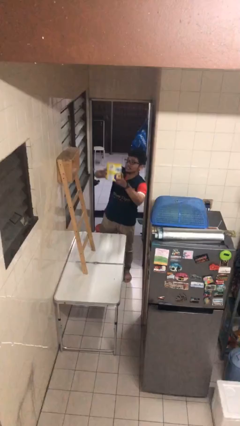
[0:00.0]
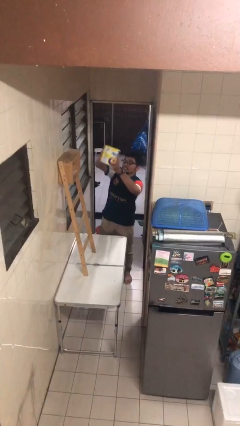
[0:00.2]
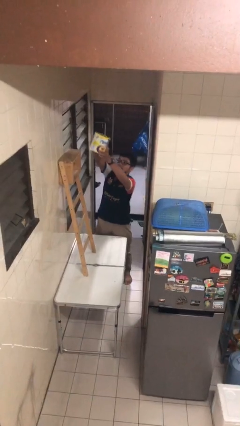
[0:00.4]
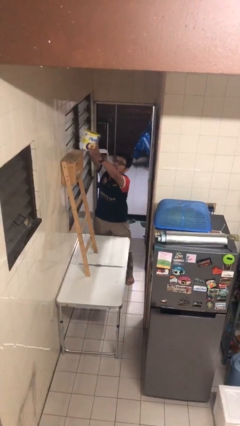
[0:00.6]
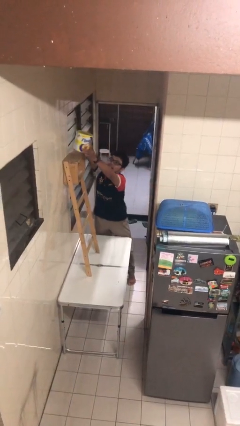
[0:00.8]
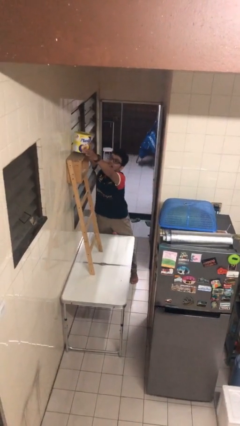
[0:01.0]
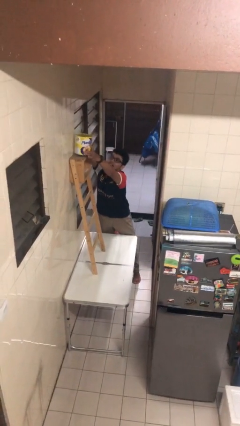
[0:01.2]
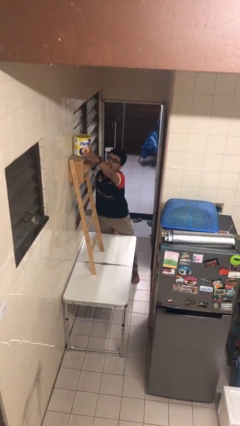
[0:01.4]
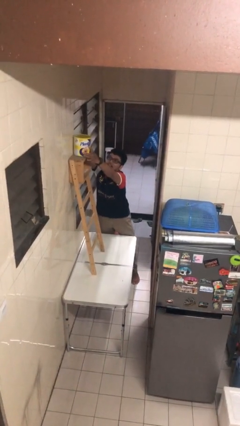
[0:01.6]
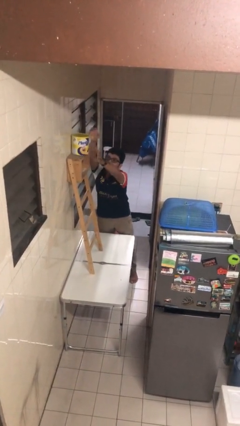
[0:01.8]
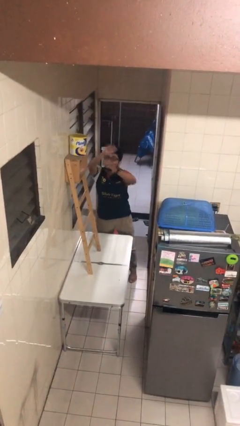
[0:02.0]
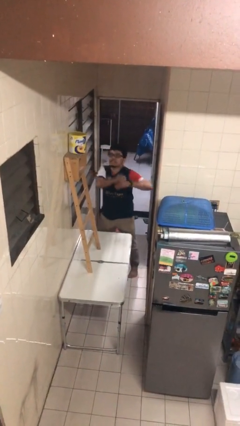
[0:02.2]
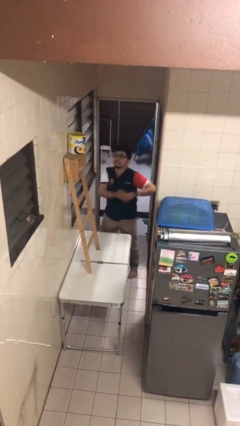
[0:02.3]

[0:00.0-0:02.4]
person puts down object on shelf

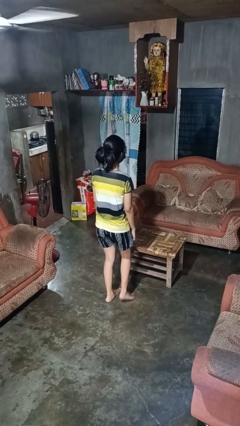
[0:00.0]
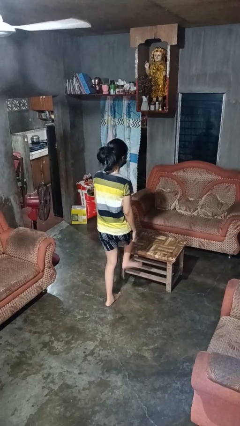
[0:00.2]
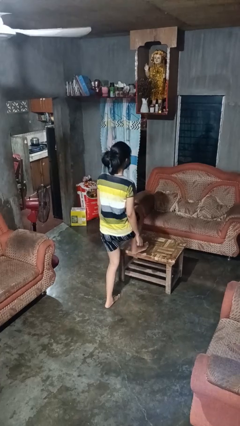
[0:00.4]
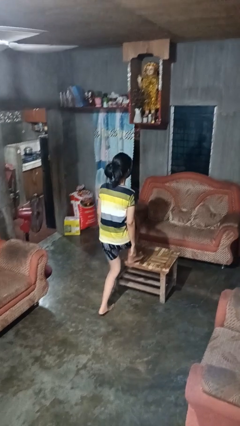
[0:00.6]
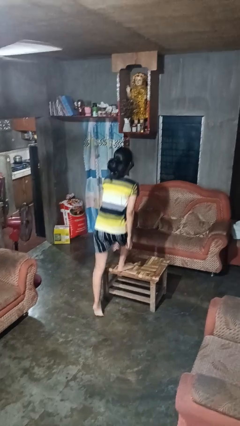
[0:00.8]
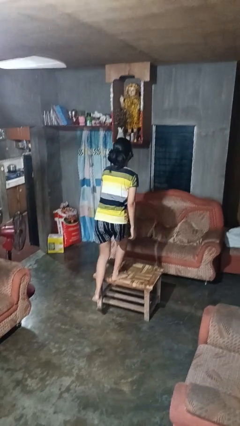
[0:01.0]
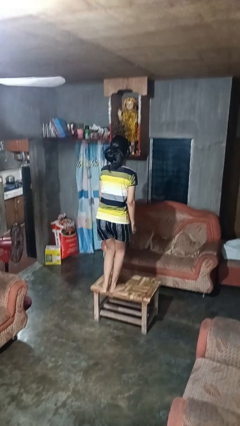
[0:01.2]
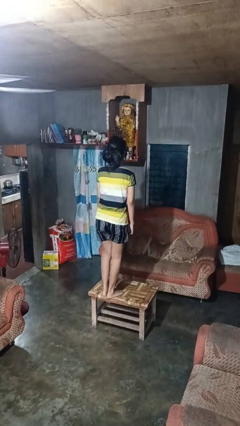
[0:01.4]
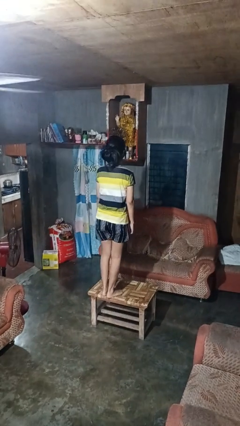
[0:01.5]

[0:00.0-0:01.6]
person climbs on table

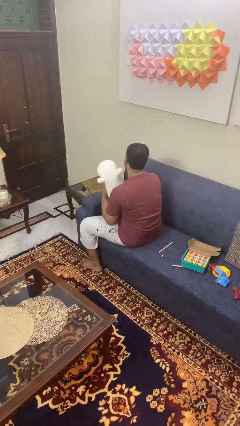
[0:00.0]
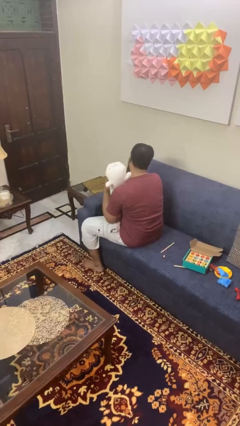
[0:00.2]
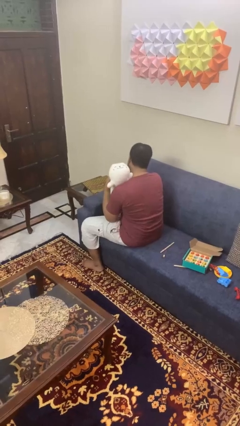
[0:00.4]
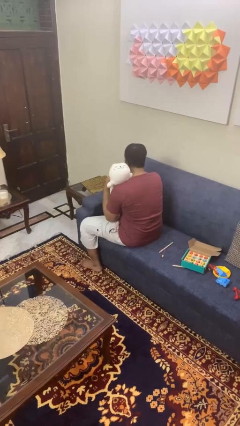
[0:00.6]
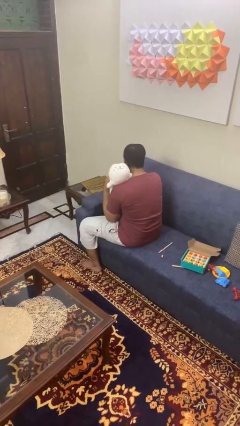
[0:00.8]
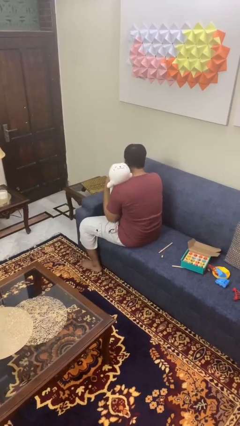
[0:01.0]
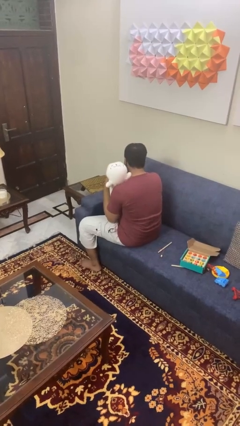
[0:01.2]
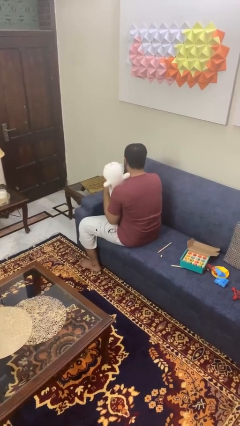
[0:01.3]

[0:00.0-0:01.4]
person hugs stuffed animal

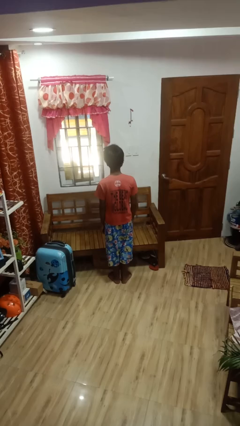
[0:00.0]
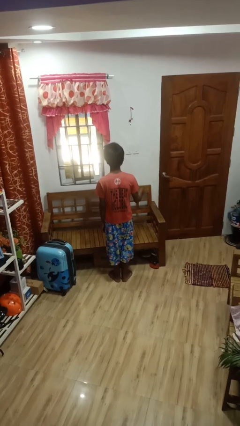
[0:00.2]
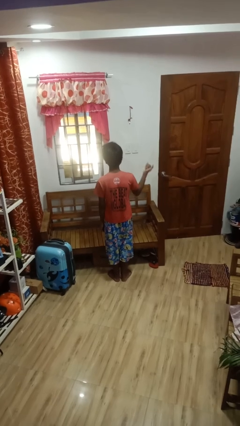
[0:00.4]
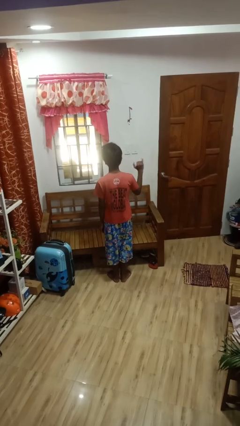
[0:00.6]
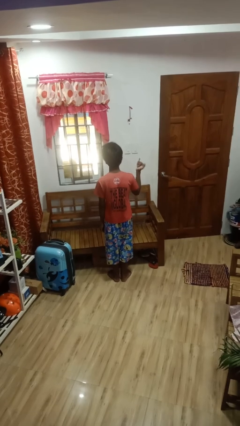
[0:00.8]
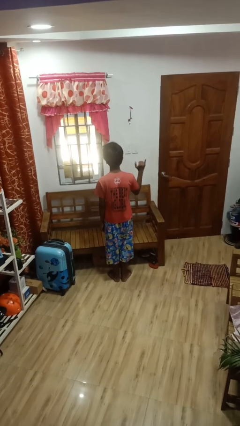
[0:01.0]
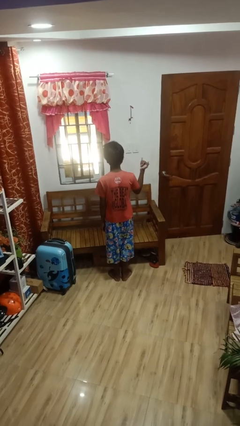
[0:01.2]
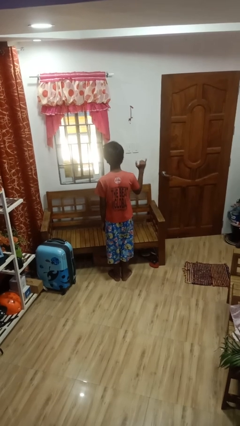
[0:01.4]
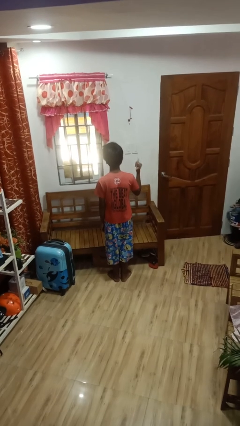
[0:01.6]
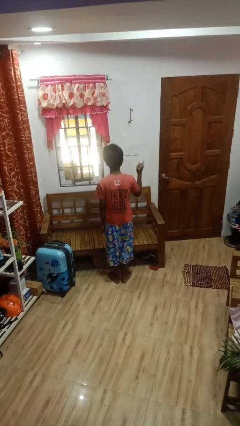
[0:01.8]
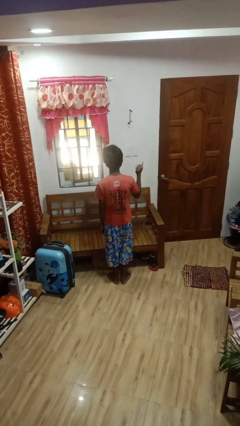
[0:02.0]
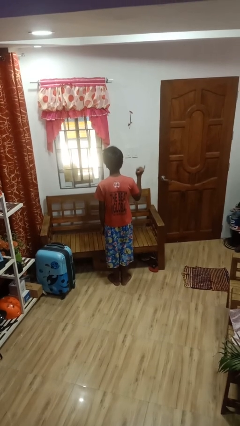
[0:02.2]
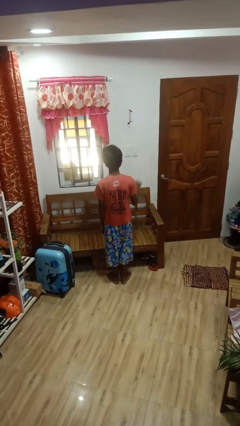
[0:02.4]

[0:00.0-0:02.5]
person gestures hang loose

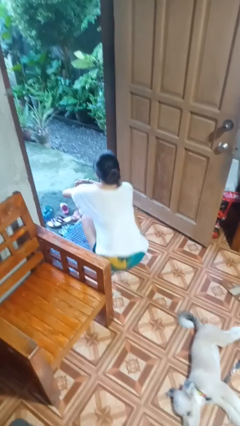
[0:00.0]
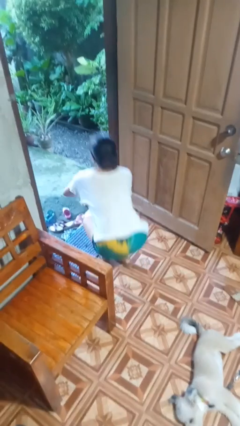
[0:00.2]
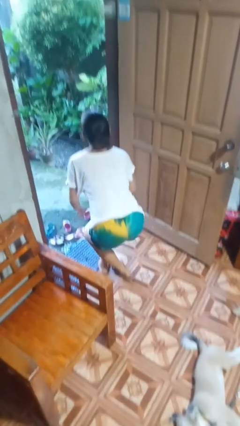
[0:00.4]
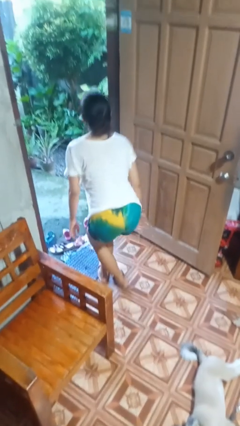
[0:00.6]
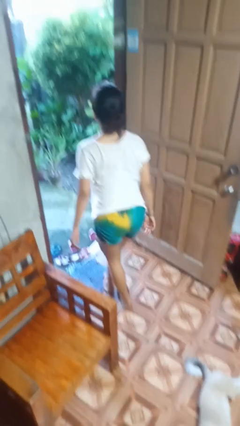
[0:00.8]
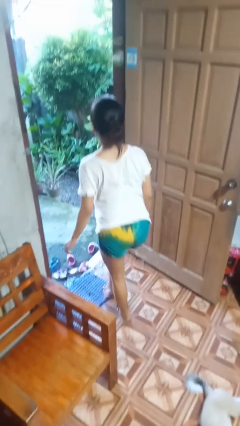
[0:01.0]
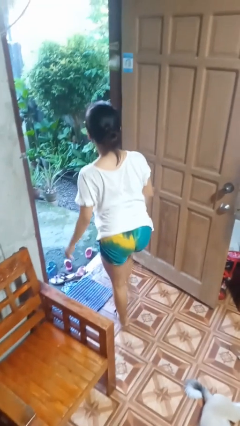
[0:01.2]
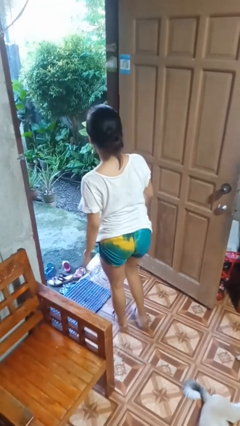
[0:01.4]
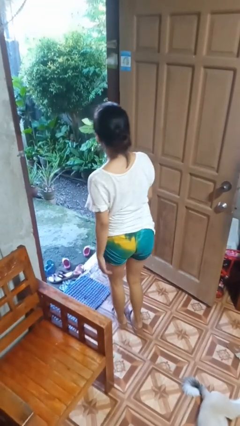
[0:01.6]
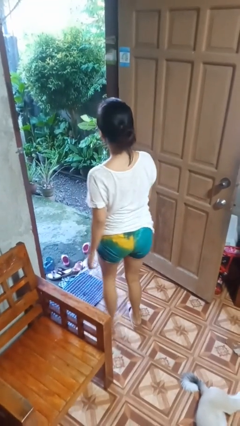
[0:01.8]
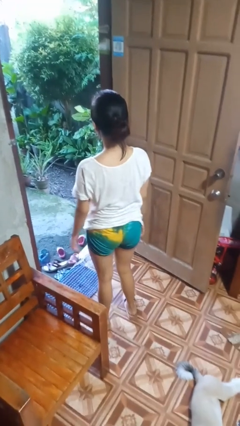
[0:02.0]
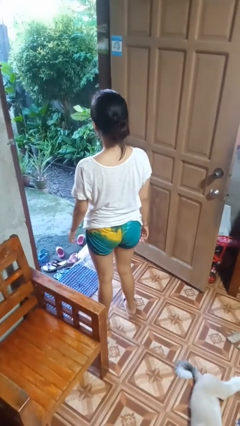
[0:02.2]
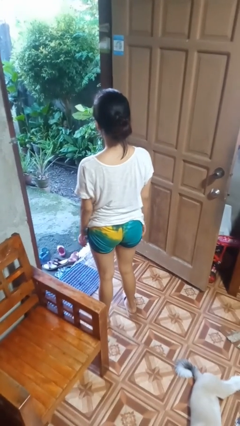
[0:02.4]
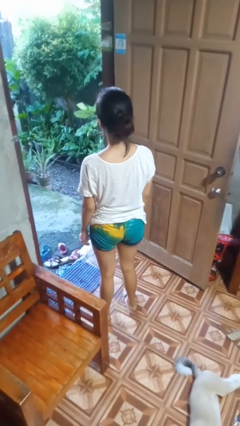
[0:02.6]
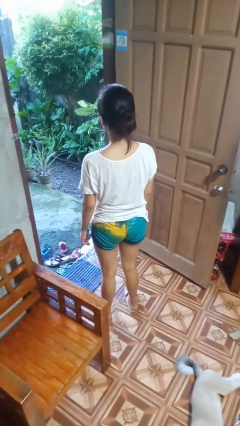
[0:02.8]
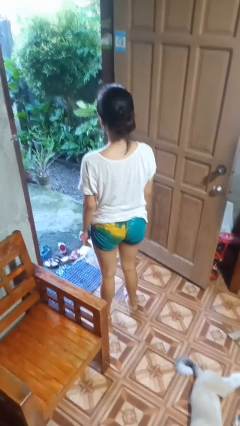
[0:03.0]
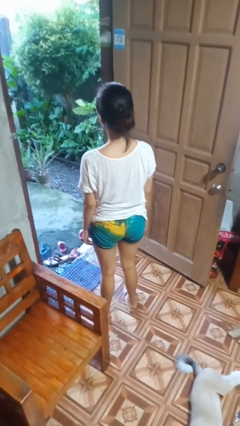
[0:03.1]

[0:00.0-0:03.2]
person stands up from floor

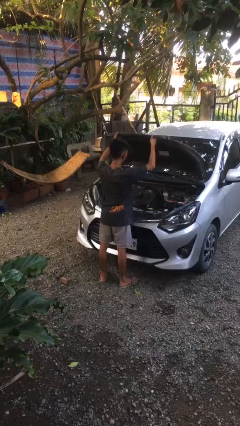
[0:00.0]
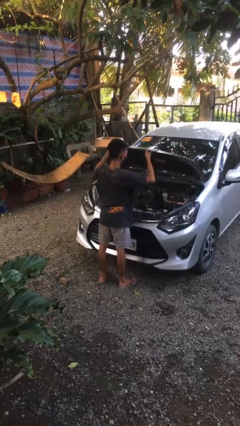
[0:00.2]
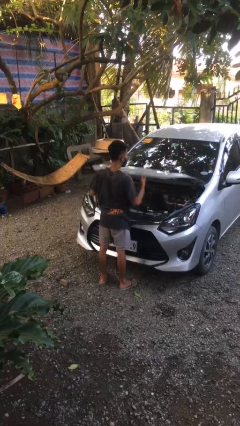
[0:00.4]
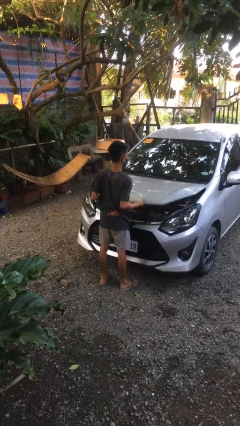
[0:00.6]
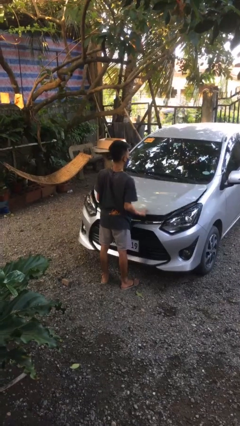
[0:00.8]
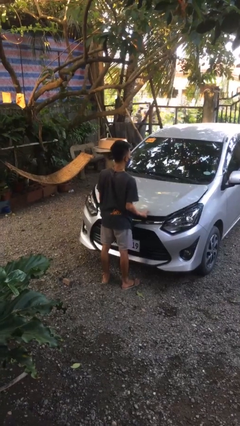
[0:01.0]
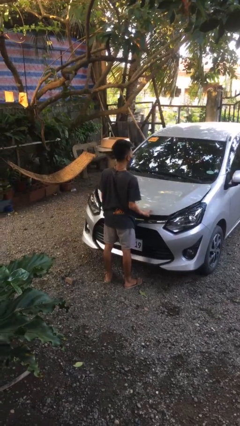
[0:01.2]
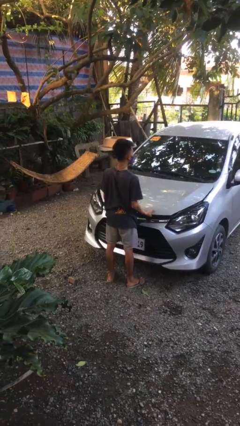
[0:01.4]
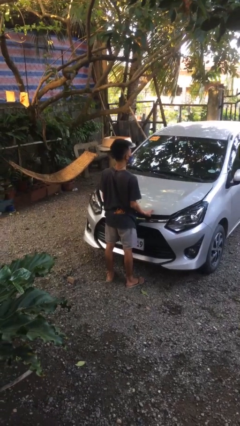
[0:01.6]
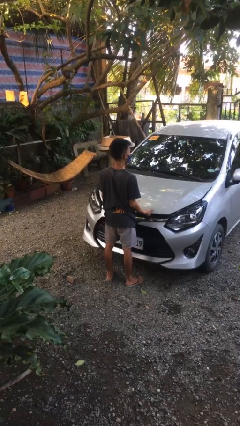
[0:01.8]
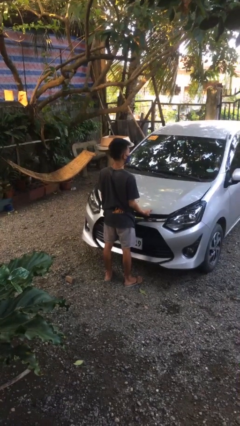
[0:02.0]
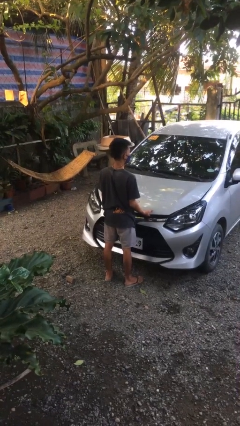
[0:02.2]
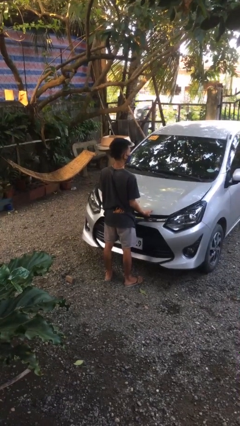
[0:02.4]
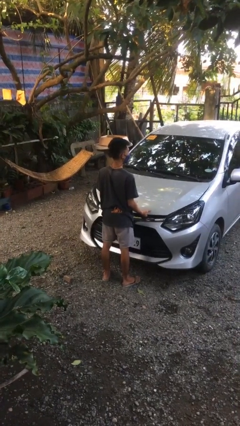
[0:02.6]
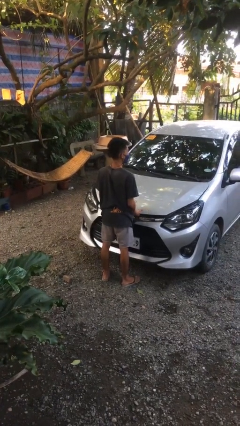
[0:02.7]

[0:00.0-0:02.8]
person closes car hood

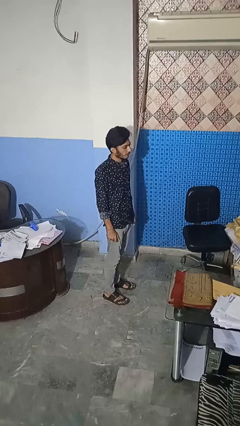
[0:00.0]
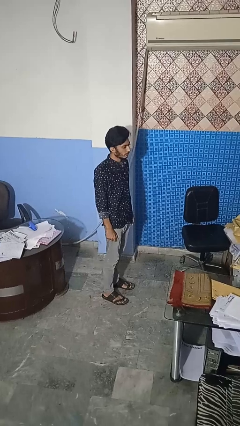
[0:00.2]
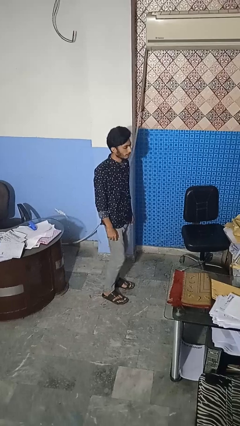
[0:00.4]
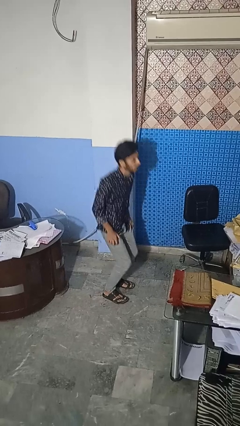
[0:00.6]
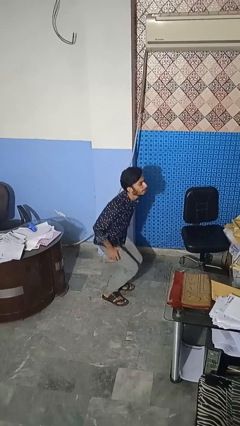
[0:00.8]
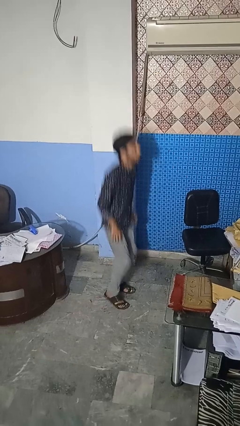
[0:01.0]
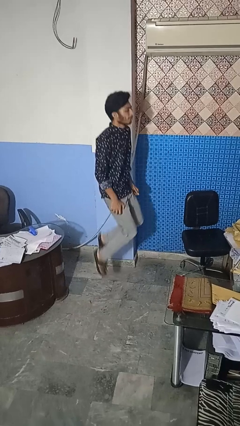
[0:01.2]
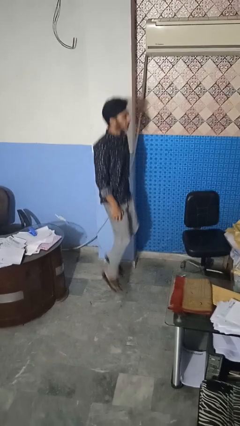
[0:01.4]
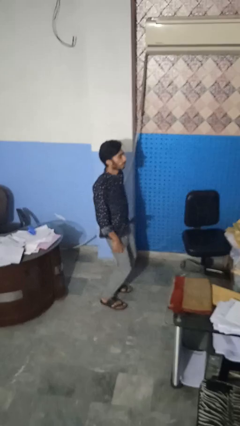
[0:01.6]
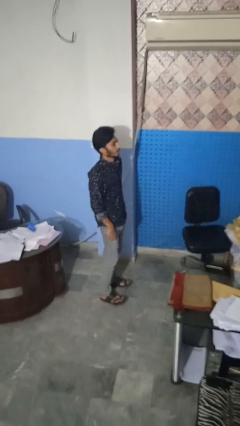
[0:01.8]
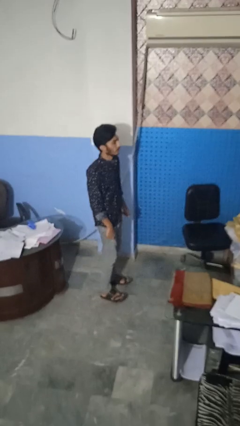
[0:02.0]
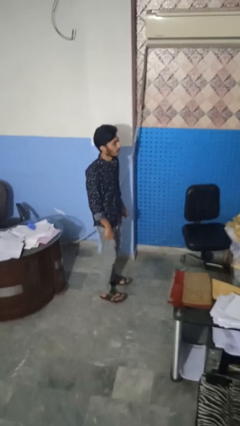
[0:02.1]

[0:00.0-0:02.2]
person jumps

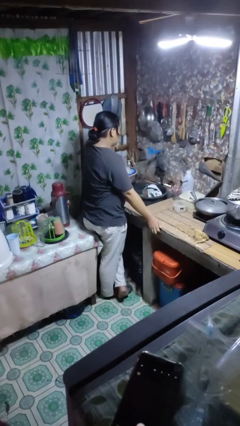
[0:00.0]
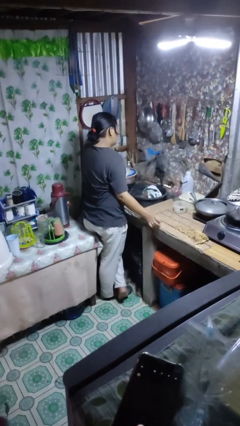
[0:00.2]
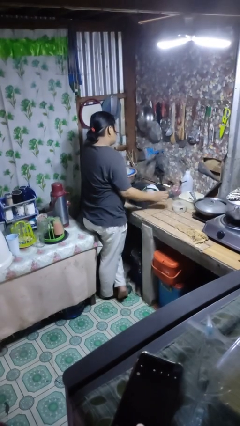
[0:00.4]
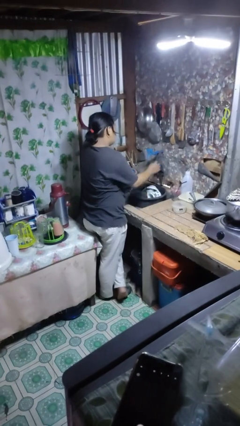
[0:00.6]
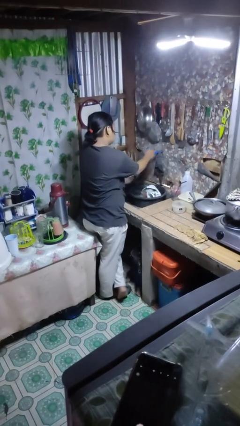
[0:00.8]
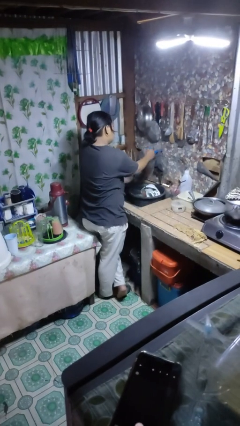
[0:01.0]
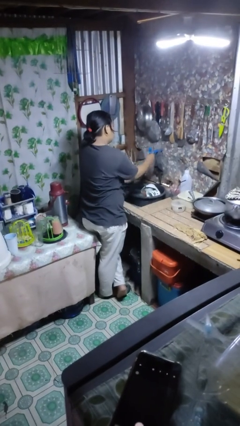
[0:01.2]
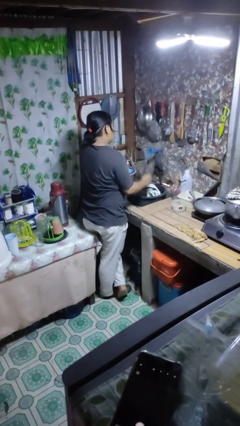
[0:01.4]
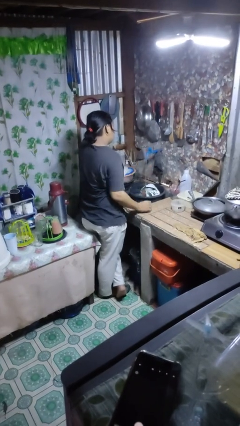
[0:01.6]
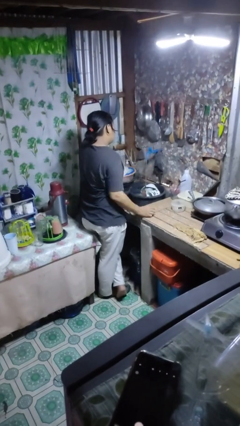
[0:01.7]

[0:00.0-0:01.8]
person turns on faucet
